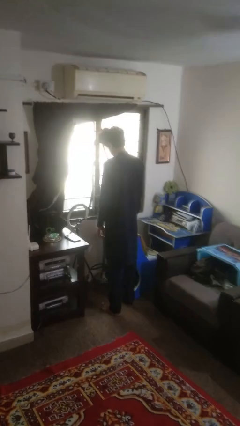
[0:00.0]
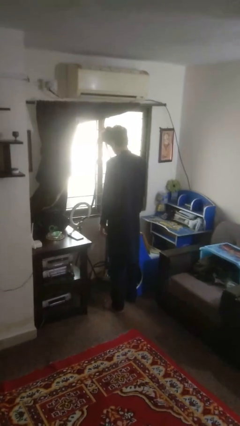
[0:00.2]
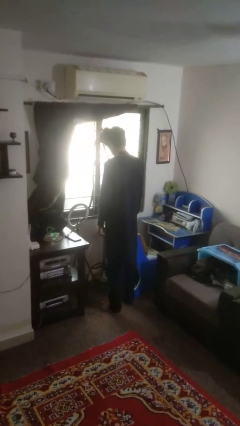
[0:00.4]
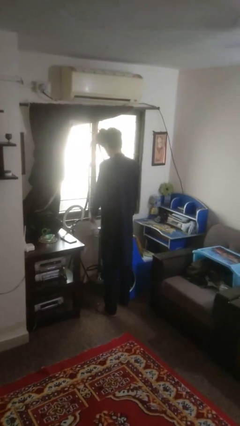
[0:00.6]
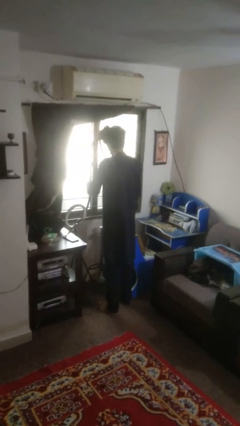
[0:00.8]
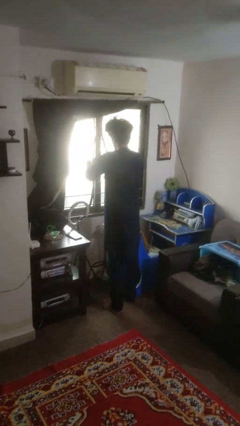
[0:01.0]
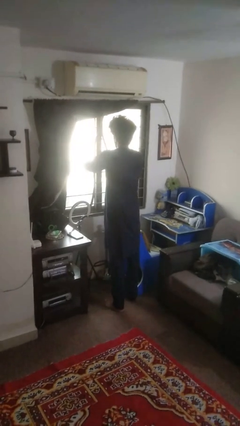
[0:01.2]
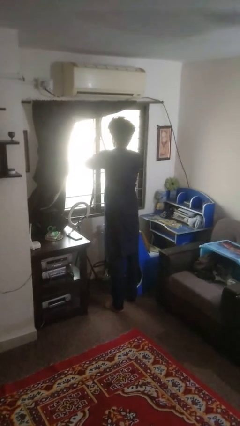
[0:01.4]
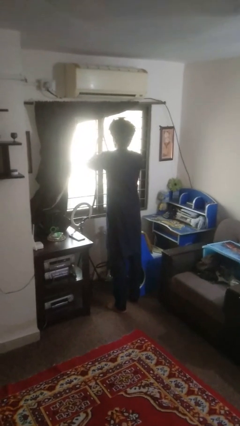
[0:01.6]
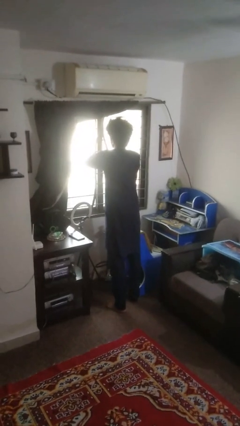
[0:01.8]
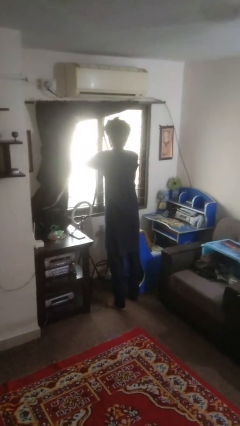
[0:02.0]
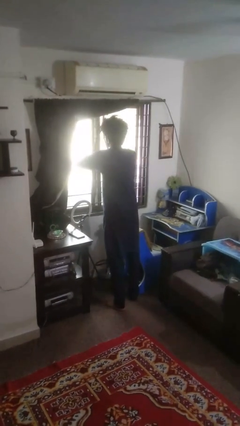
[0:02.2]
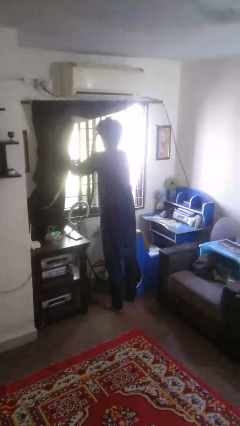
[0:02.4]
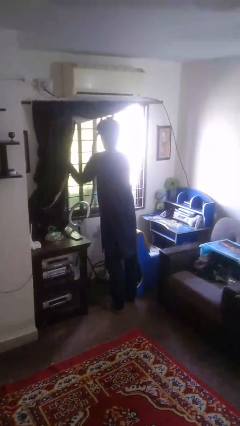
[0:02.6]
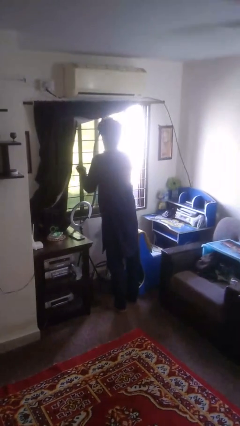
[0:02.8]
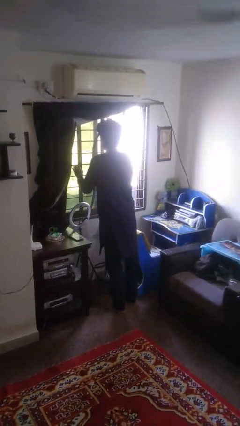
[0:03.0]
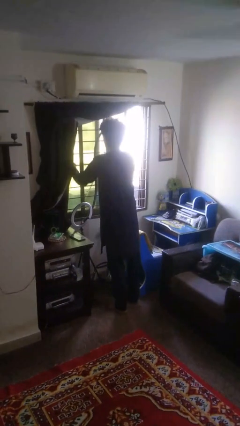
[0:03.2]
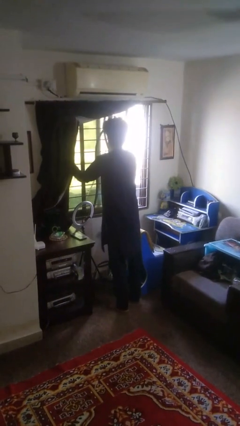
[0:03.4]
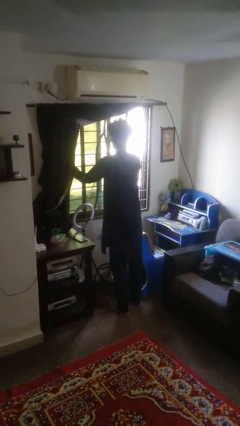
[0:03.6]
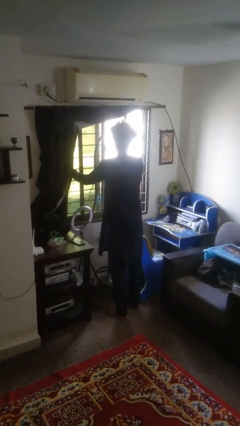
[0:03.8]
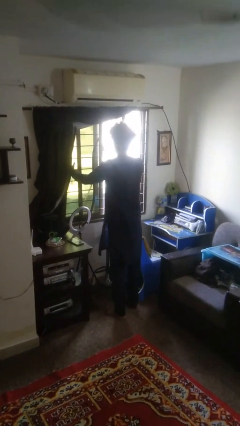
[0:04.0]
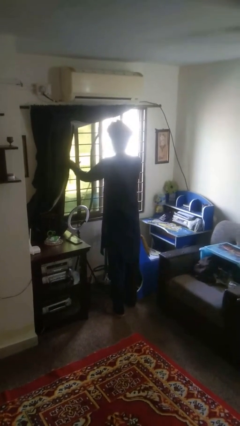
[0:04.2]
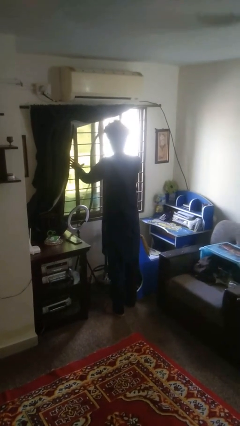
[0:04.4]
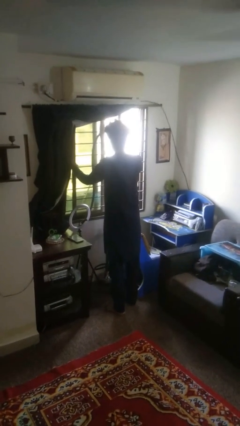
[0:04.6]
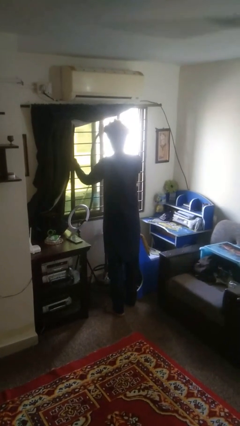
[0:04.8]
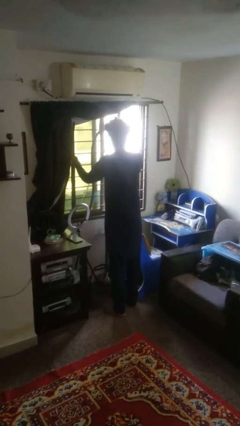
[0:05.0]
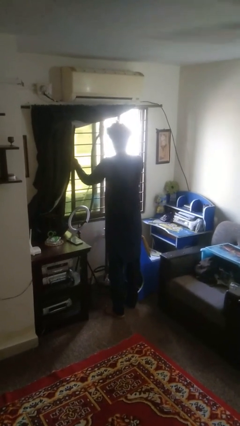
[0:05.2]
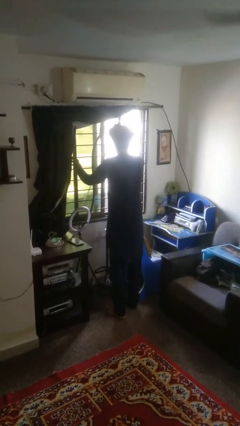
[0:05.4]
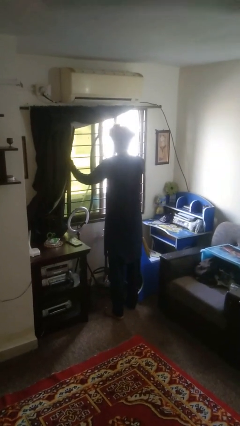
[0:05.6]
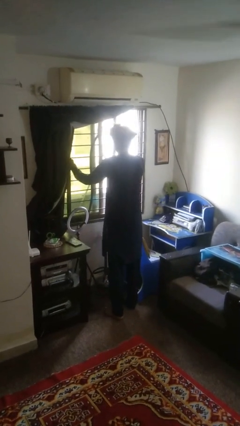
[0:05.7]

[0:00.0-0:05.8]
person opens home window

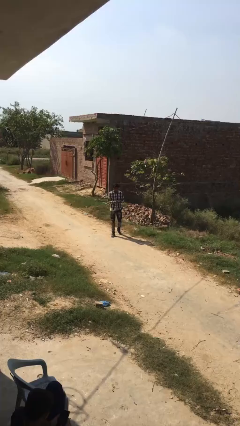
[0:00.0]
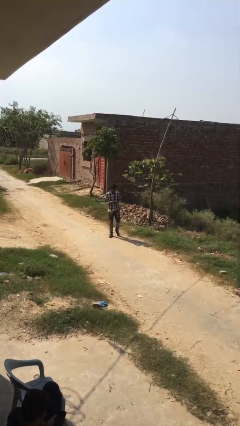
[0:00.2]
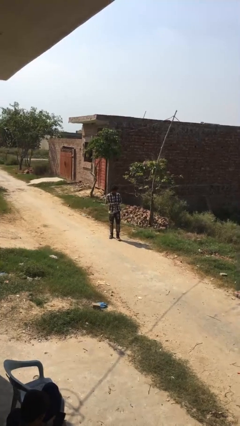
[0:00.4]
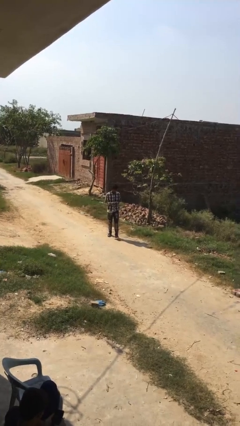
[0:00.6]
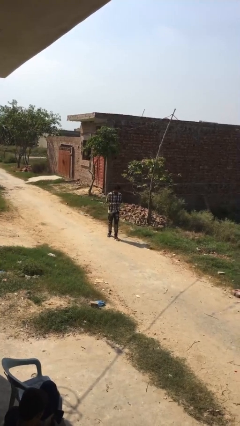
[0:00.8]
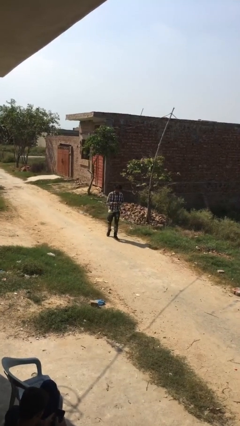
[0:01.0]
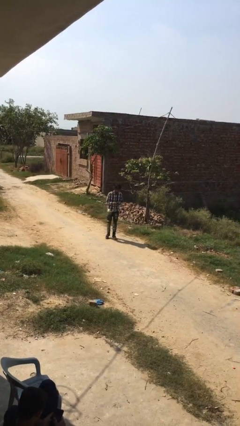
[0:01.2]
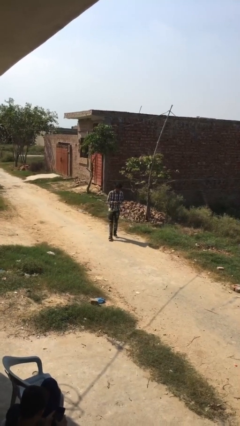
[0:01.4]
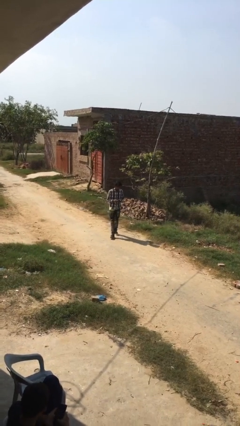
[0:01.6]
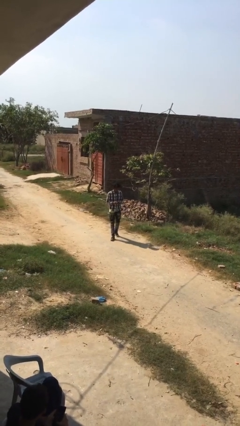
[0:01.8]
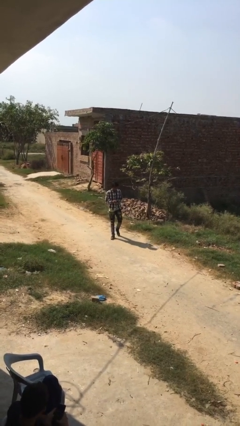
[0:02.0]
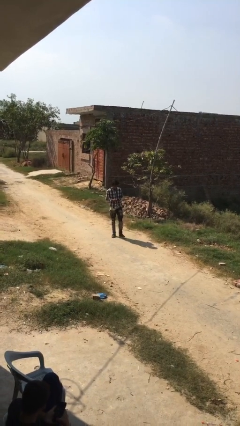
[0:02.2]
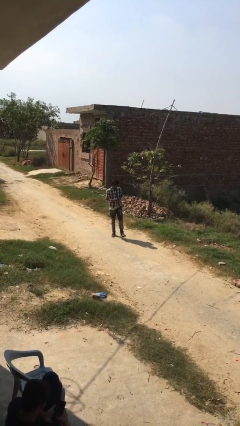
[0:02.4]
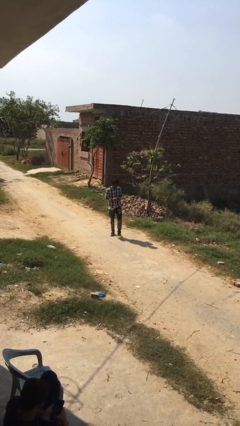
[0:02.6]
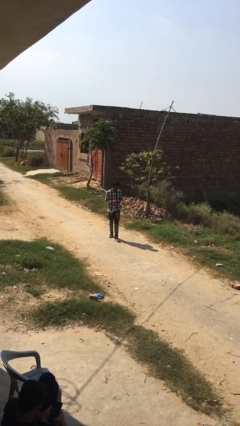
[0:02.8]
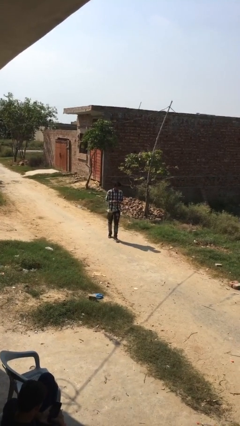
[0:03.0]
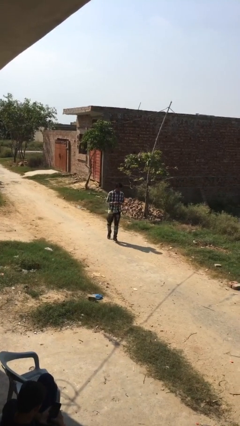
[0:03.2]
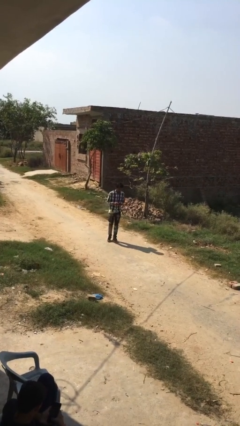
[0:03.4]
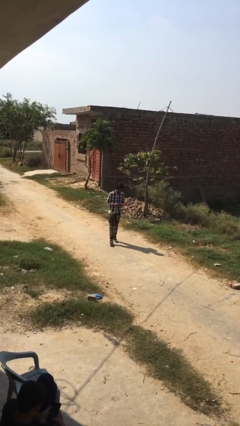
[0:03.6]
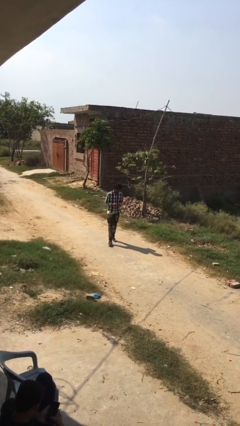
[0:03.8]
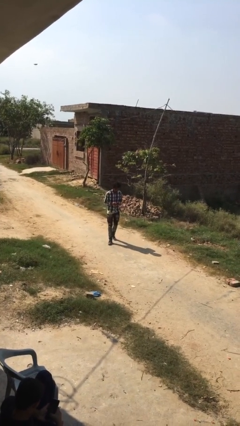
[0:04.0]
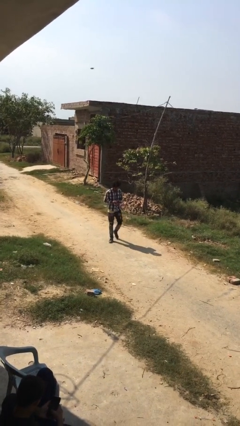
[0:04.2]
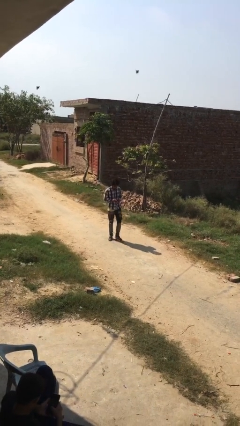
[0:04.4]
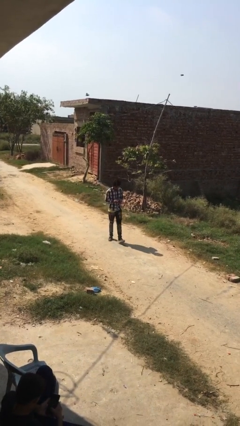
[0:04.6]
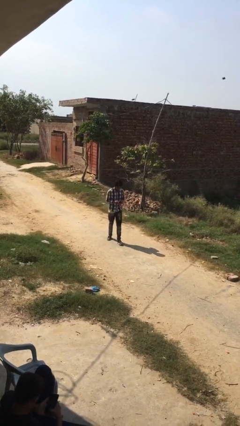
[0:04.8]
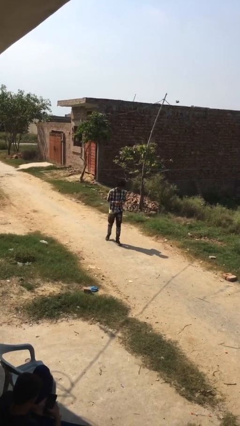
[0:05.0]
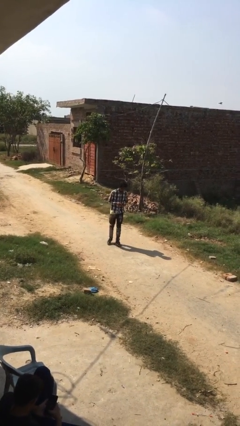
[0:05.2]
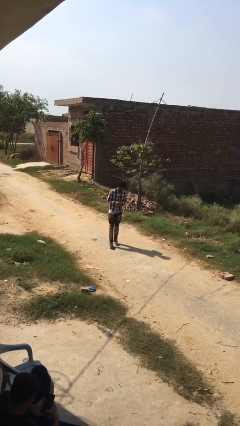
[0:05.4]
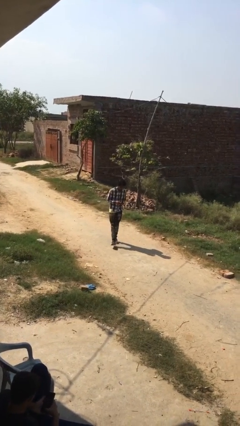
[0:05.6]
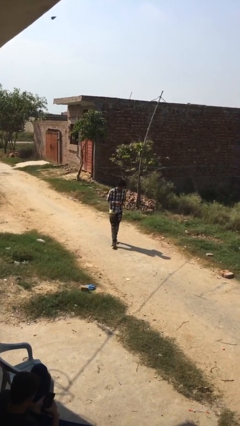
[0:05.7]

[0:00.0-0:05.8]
person texts on phone

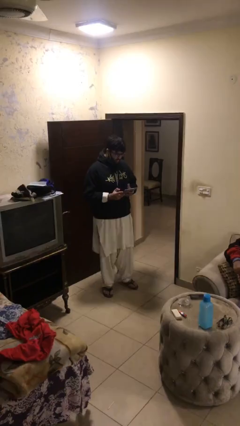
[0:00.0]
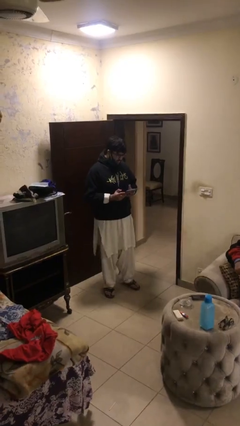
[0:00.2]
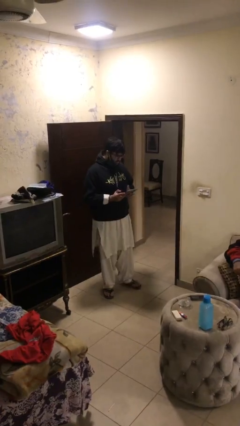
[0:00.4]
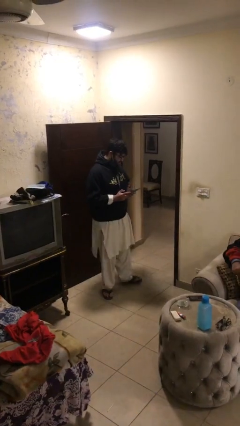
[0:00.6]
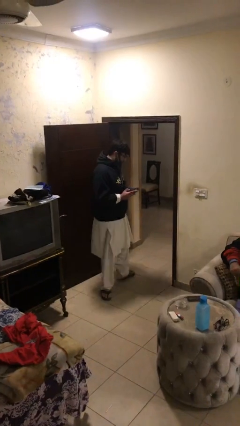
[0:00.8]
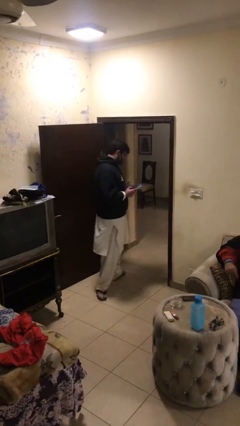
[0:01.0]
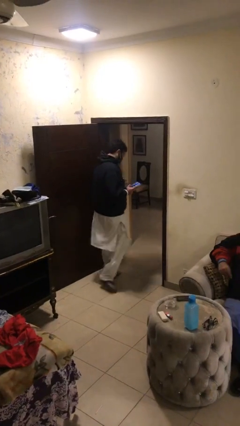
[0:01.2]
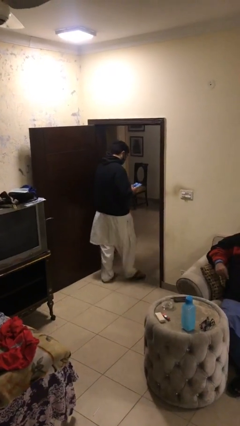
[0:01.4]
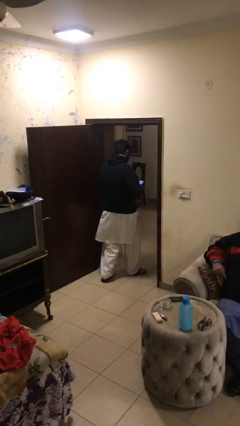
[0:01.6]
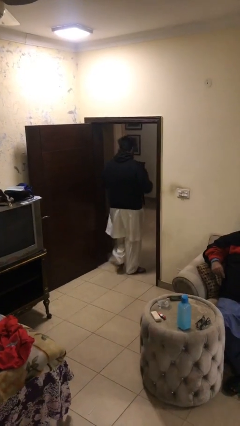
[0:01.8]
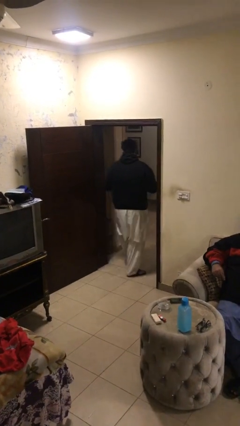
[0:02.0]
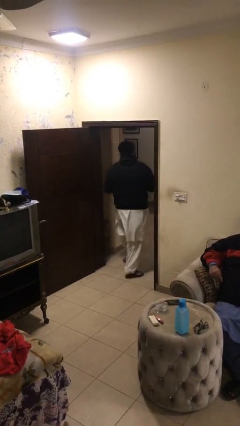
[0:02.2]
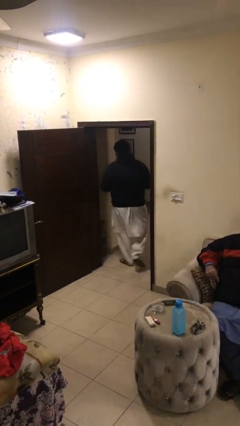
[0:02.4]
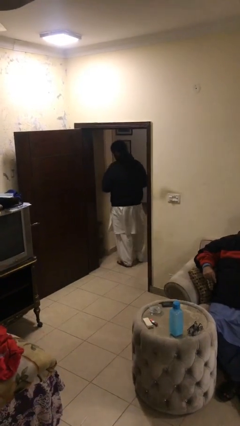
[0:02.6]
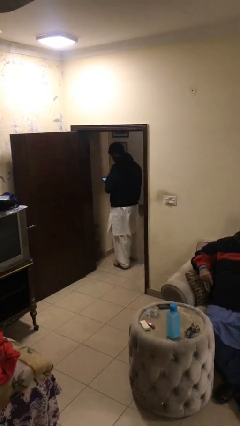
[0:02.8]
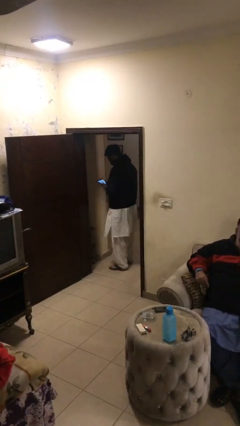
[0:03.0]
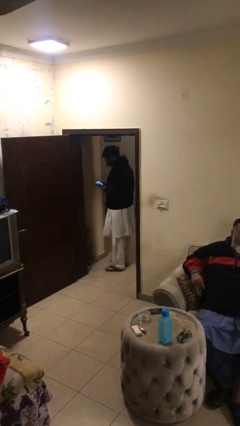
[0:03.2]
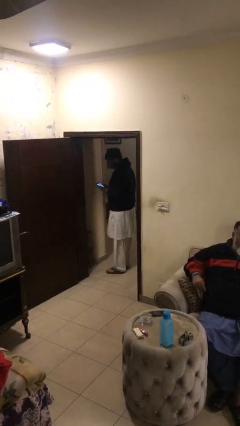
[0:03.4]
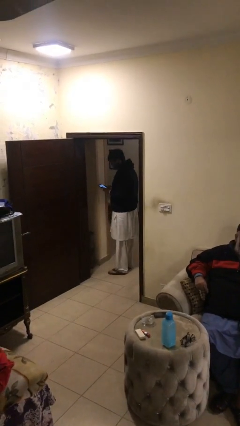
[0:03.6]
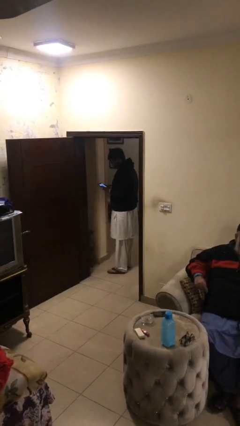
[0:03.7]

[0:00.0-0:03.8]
person exits scene through structure

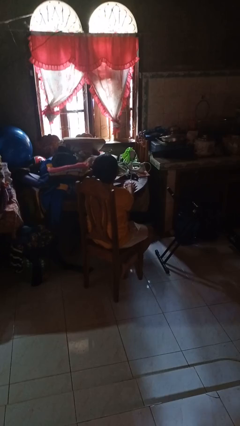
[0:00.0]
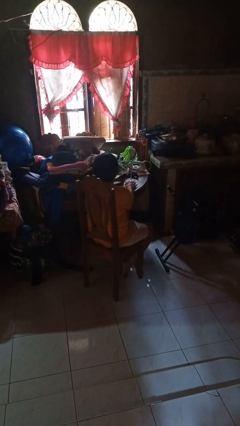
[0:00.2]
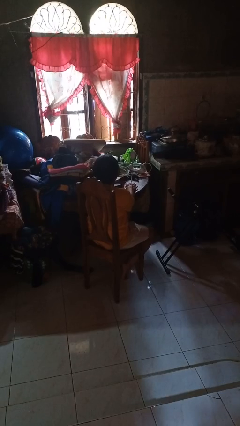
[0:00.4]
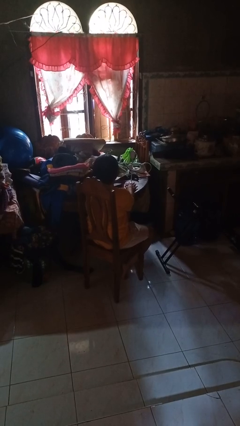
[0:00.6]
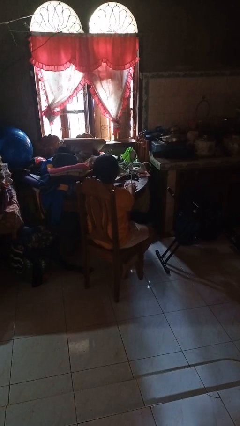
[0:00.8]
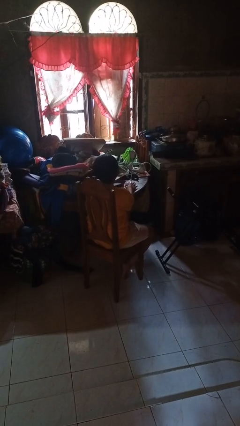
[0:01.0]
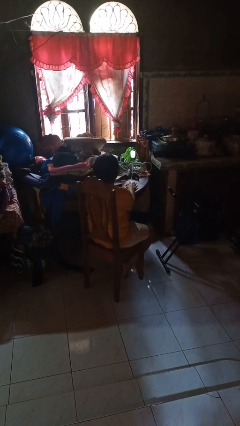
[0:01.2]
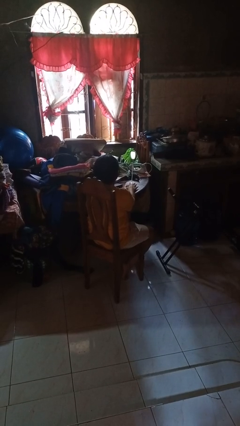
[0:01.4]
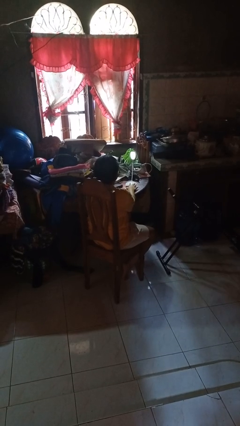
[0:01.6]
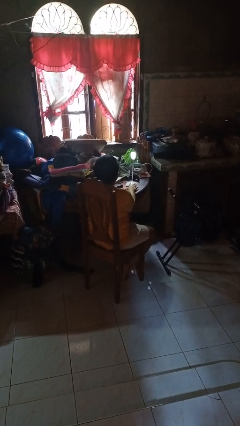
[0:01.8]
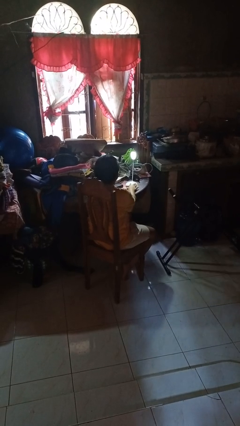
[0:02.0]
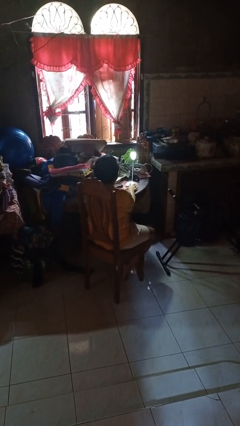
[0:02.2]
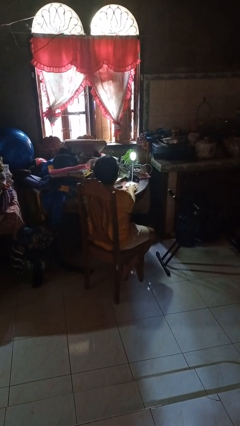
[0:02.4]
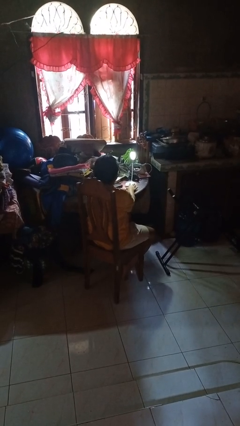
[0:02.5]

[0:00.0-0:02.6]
person turns on lamp
